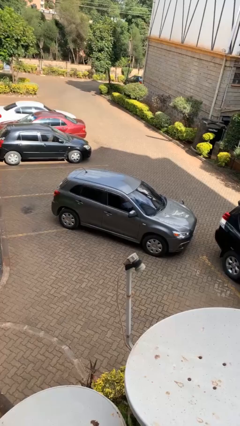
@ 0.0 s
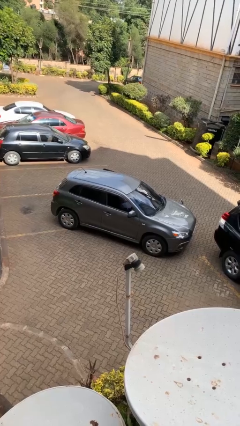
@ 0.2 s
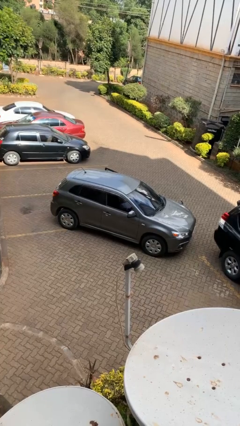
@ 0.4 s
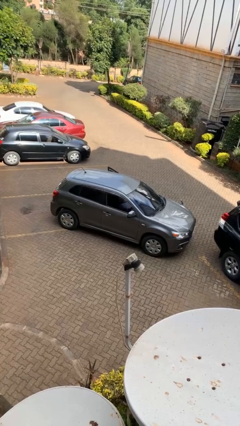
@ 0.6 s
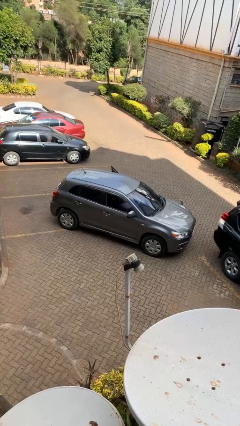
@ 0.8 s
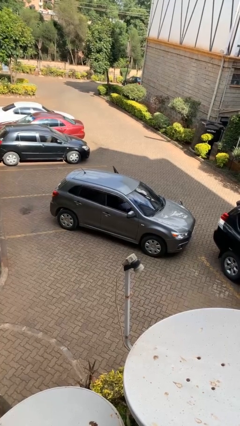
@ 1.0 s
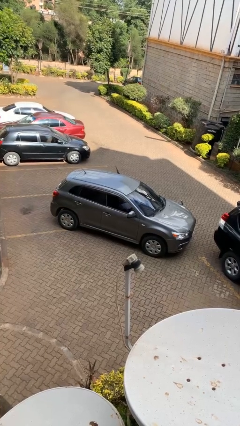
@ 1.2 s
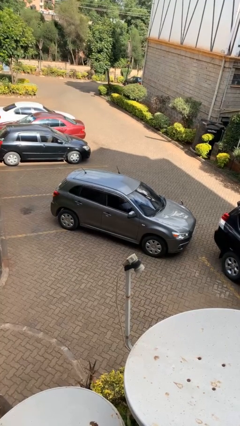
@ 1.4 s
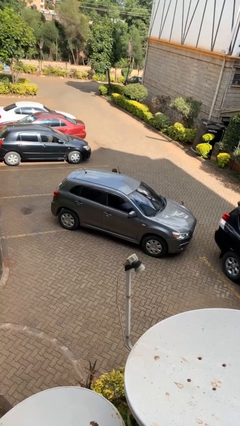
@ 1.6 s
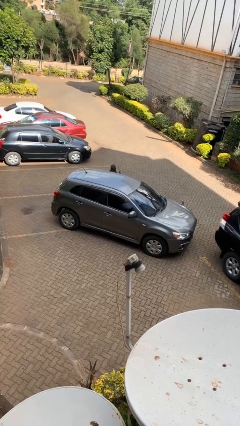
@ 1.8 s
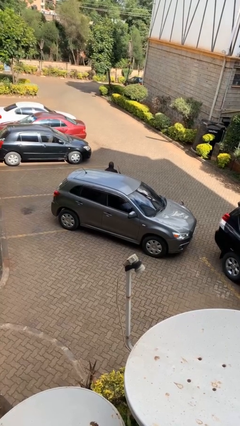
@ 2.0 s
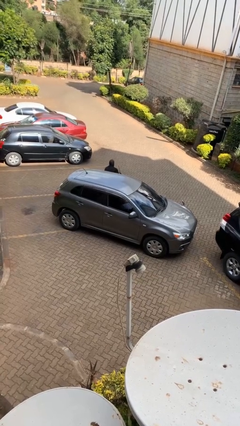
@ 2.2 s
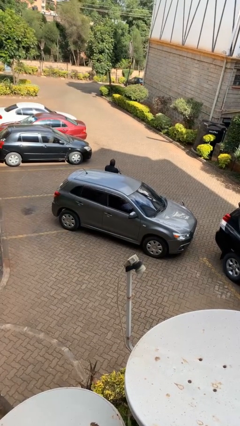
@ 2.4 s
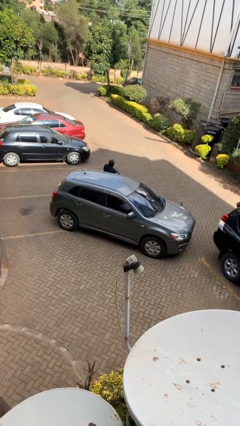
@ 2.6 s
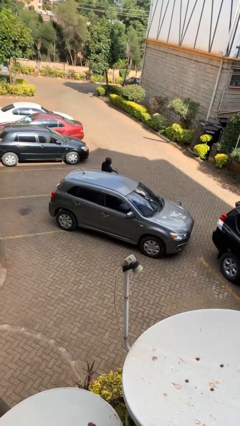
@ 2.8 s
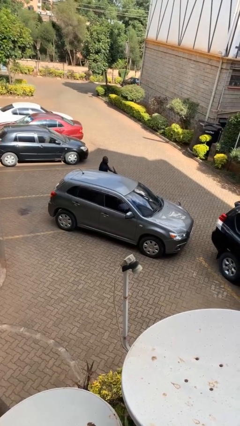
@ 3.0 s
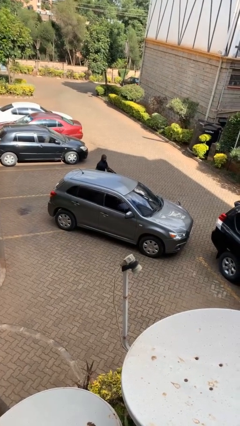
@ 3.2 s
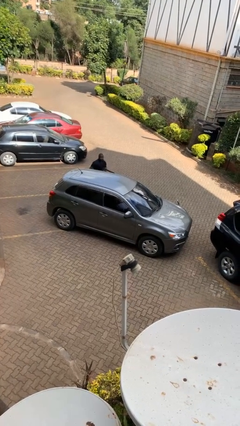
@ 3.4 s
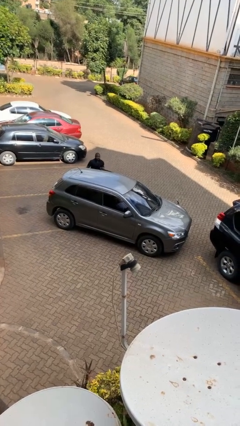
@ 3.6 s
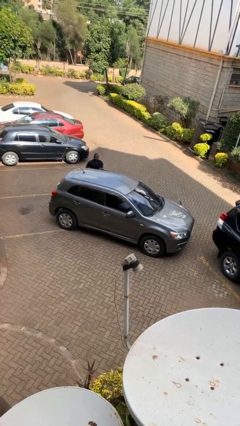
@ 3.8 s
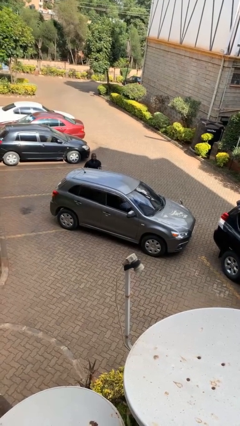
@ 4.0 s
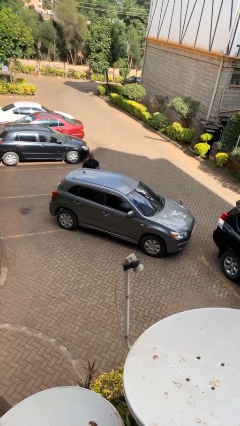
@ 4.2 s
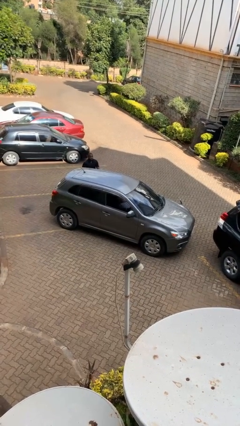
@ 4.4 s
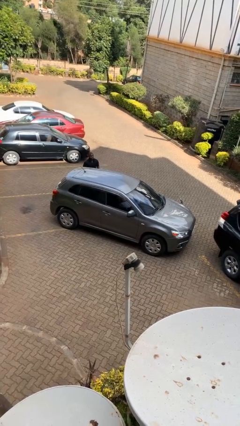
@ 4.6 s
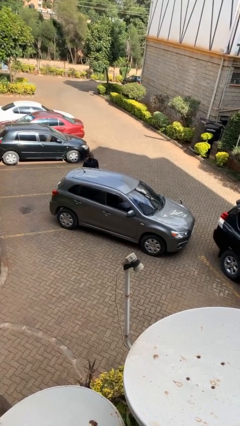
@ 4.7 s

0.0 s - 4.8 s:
car drops off person

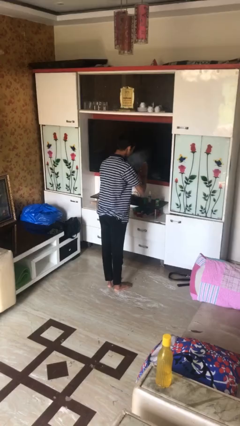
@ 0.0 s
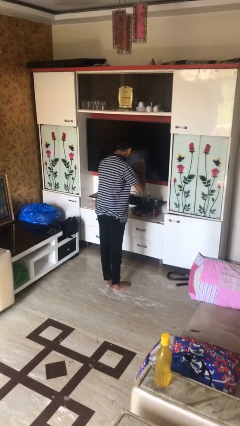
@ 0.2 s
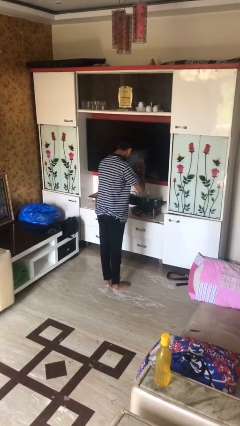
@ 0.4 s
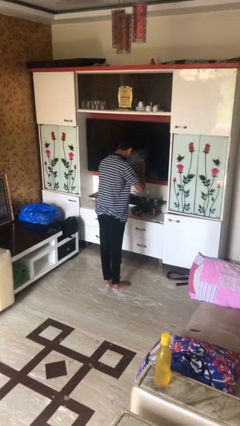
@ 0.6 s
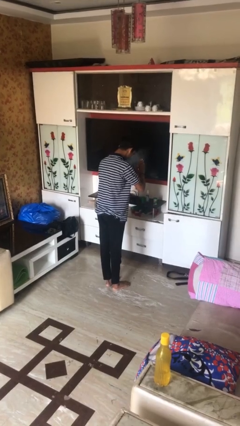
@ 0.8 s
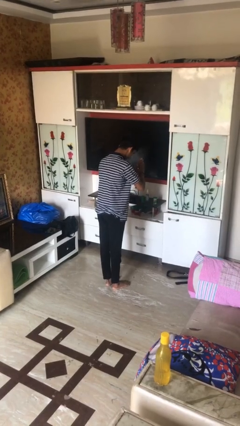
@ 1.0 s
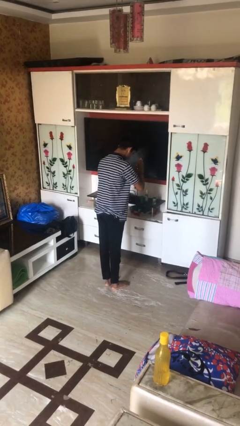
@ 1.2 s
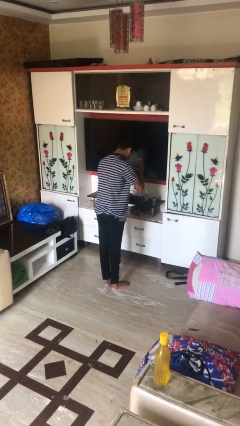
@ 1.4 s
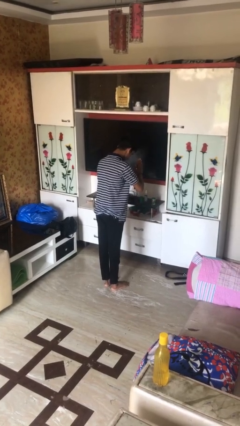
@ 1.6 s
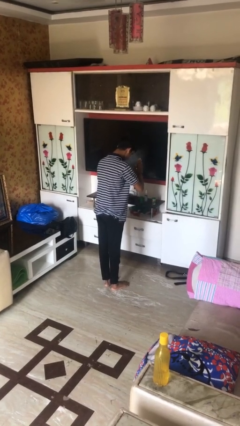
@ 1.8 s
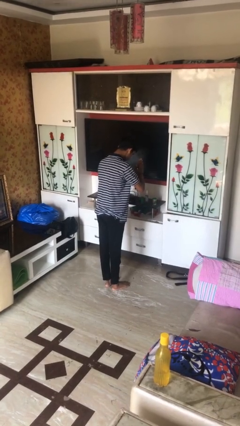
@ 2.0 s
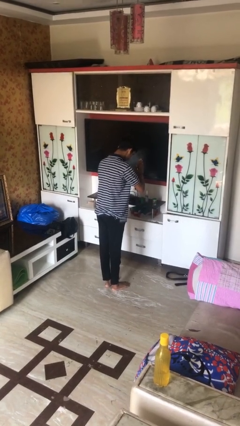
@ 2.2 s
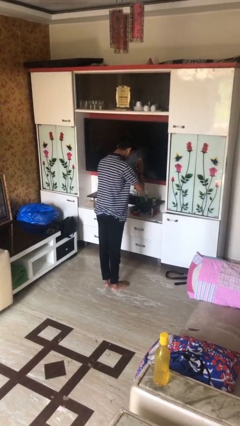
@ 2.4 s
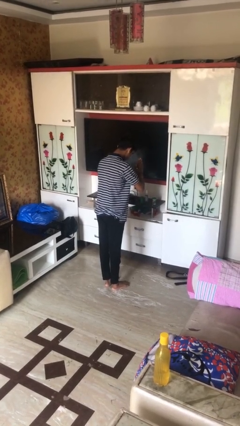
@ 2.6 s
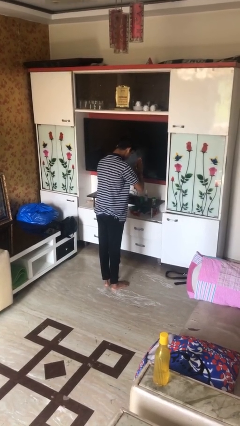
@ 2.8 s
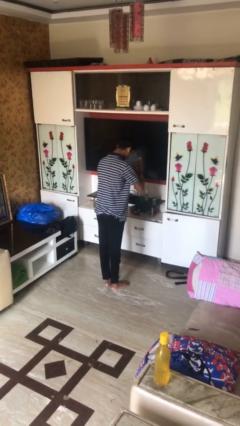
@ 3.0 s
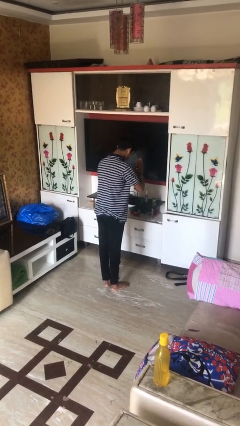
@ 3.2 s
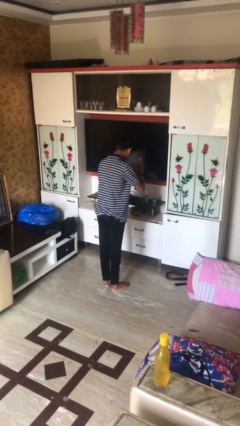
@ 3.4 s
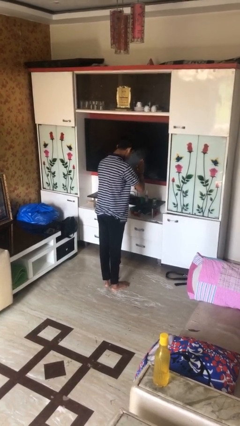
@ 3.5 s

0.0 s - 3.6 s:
person prays

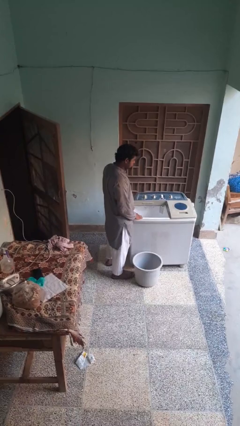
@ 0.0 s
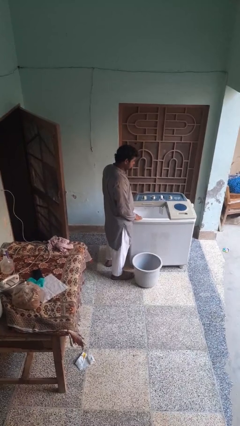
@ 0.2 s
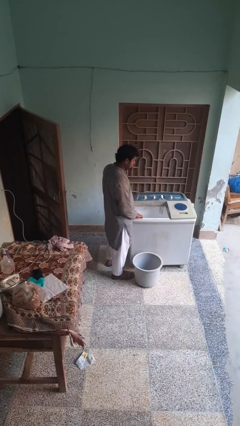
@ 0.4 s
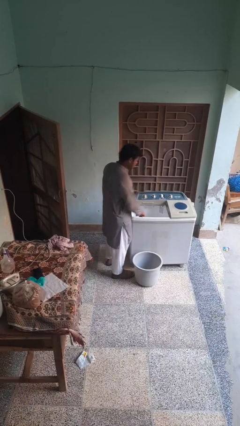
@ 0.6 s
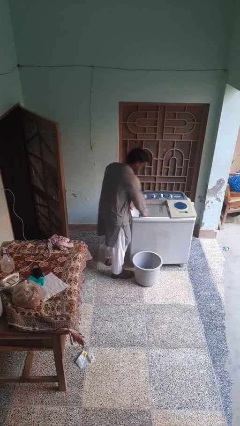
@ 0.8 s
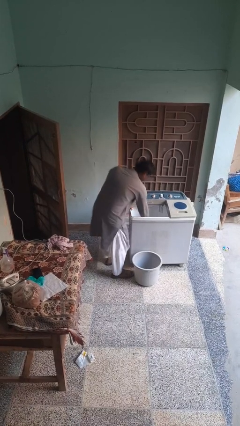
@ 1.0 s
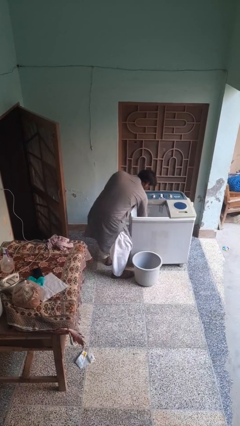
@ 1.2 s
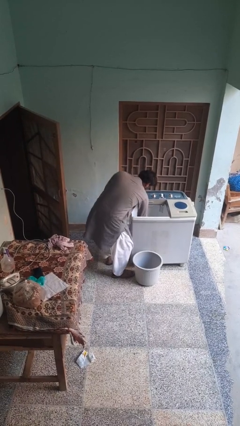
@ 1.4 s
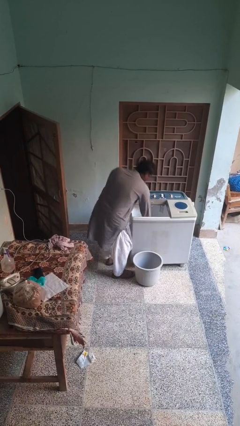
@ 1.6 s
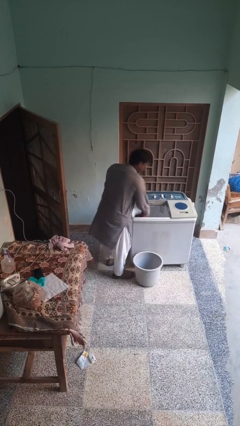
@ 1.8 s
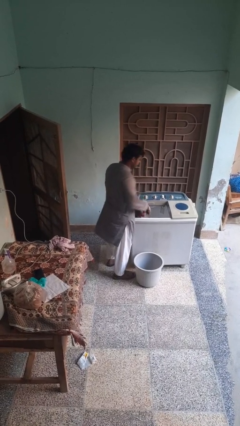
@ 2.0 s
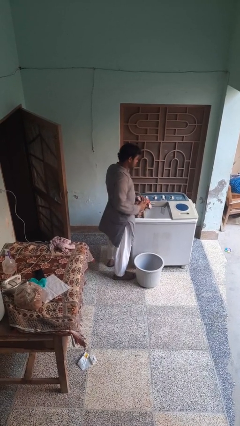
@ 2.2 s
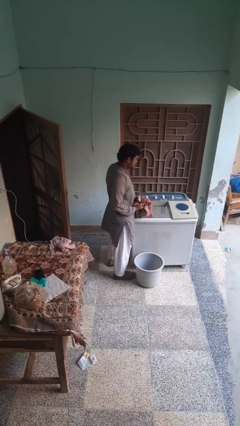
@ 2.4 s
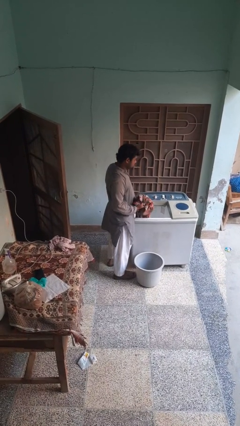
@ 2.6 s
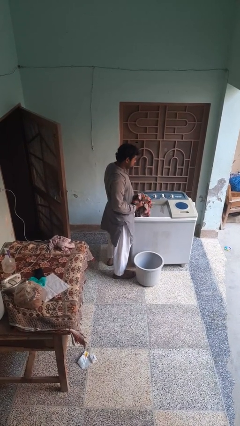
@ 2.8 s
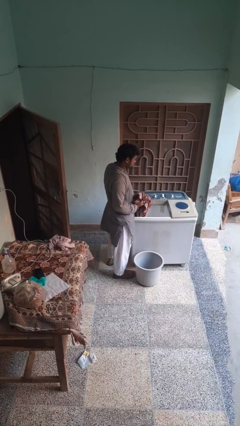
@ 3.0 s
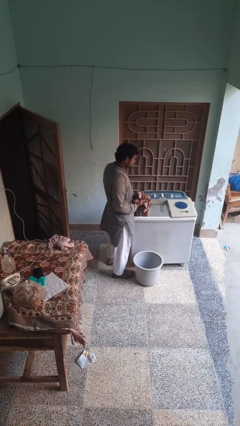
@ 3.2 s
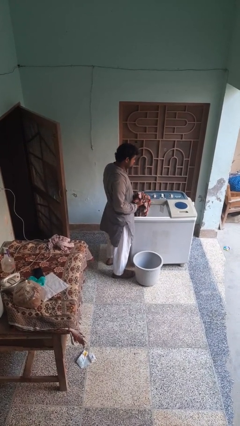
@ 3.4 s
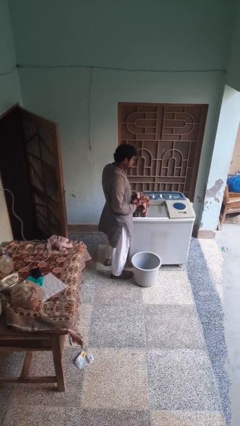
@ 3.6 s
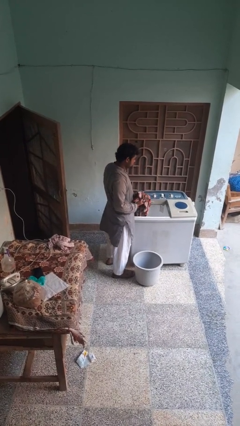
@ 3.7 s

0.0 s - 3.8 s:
person unloads clotheswasher

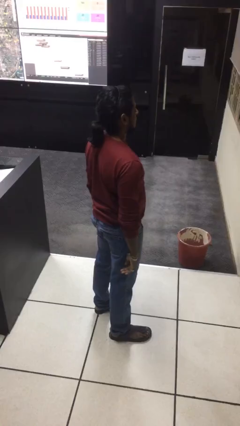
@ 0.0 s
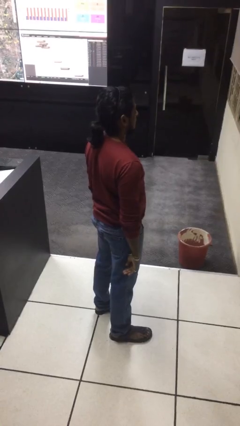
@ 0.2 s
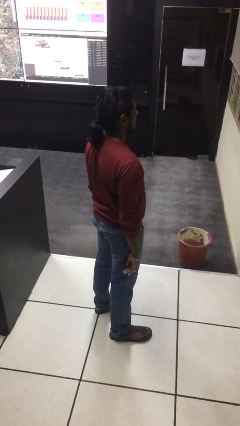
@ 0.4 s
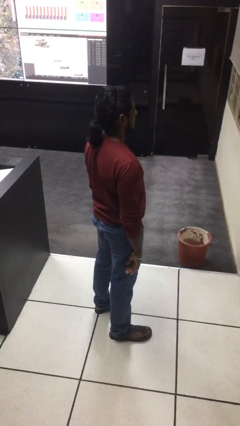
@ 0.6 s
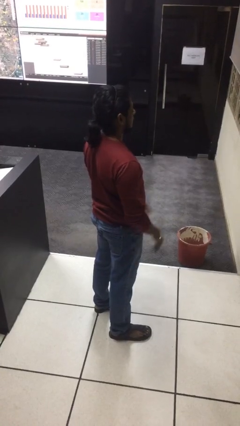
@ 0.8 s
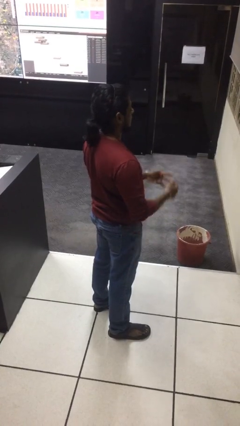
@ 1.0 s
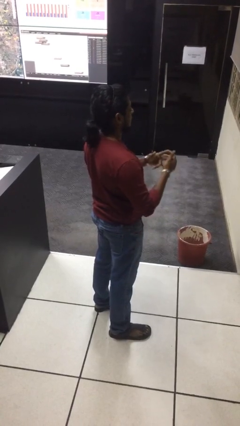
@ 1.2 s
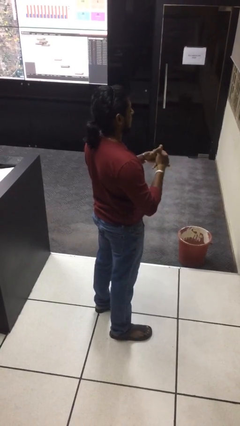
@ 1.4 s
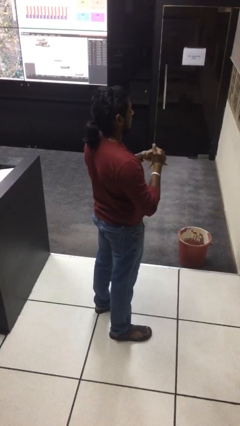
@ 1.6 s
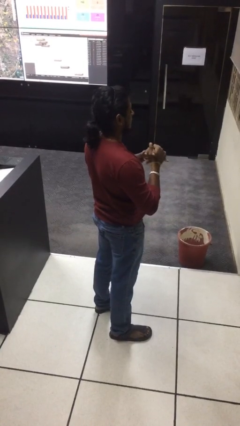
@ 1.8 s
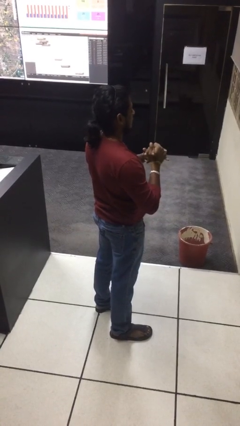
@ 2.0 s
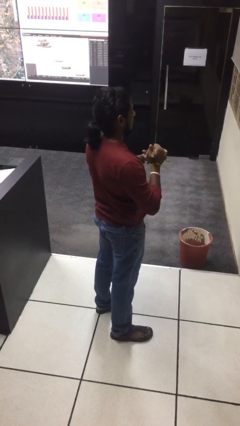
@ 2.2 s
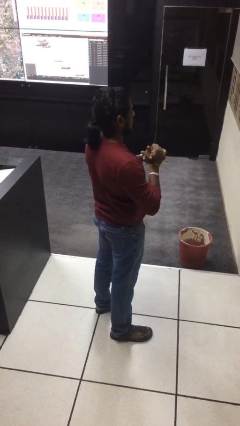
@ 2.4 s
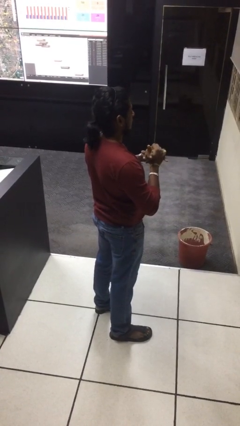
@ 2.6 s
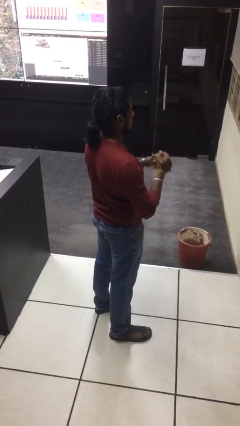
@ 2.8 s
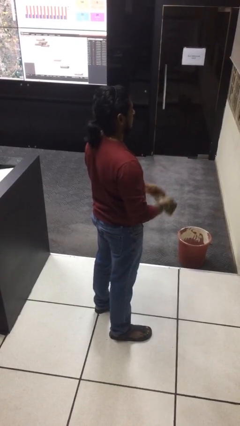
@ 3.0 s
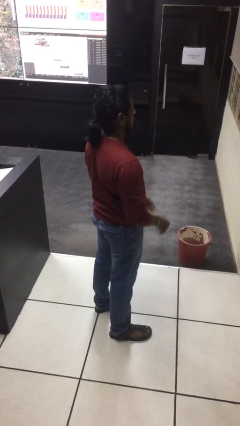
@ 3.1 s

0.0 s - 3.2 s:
person cracks knuckles

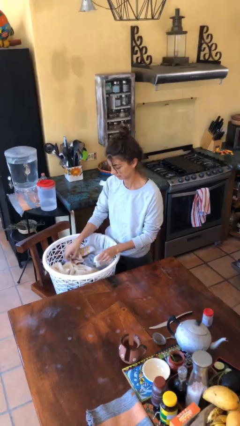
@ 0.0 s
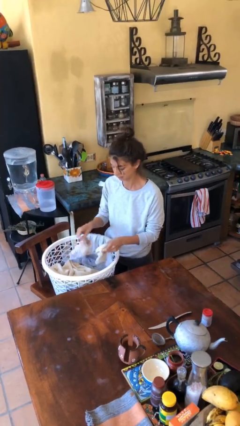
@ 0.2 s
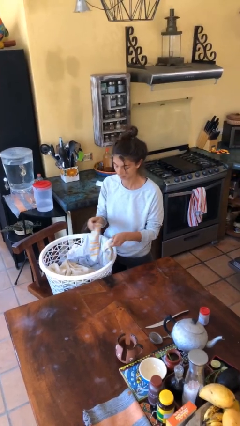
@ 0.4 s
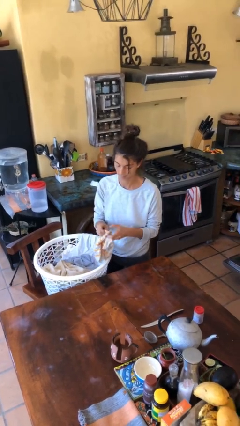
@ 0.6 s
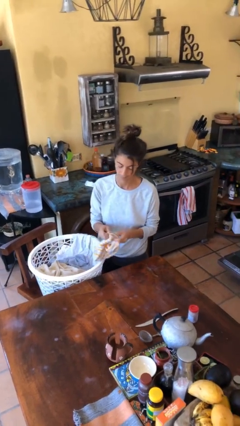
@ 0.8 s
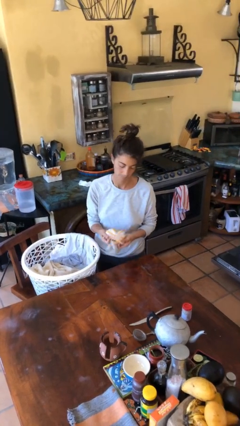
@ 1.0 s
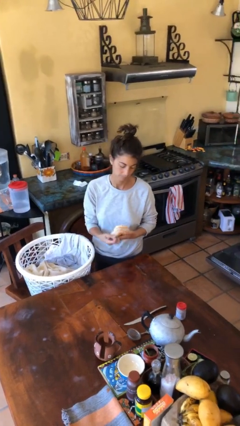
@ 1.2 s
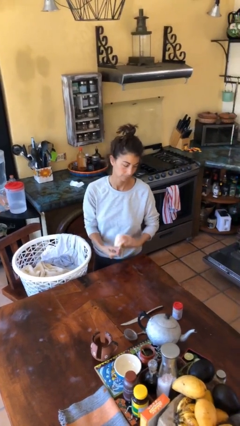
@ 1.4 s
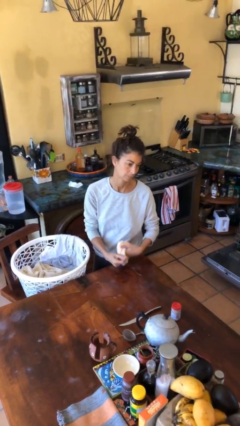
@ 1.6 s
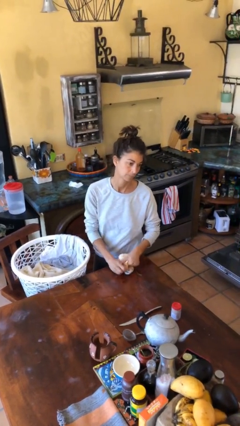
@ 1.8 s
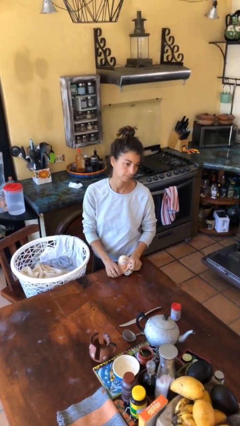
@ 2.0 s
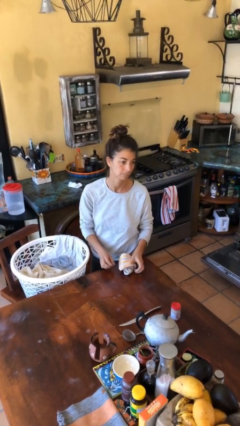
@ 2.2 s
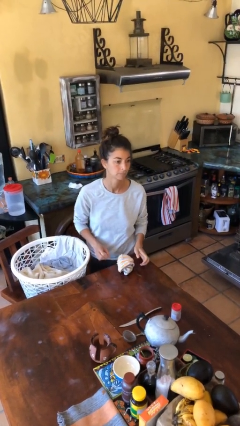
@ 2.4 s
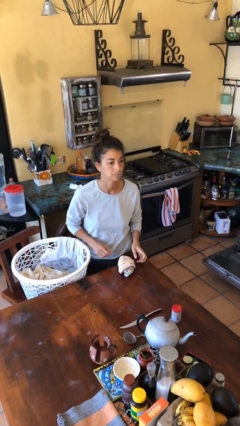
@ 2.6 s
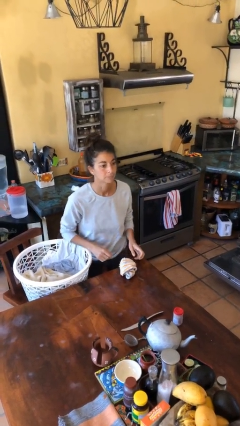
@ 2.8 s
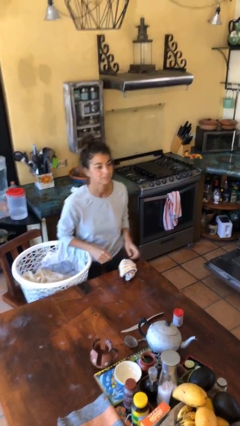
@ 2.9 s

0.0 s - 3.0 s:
person folds socks
